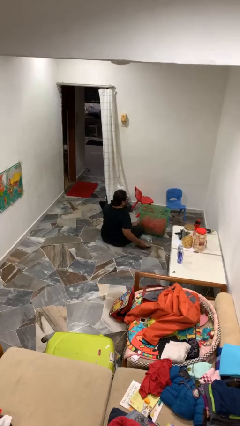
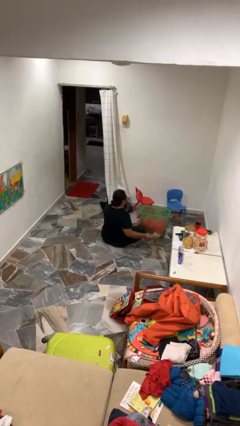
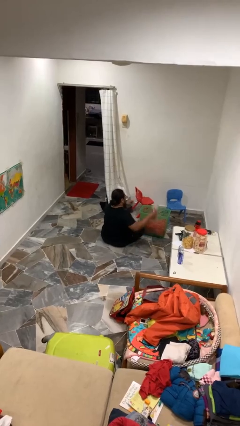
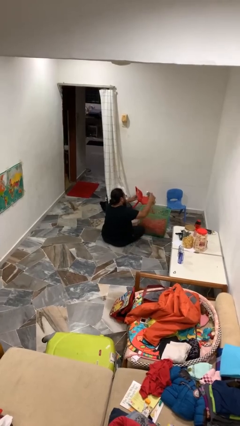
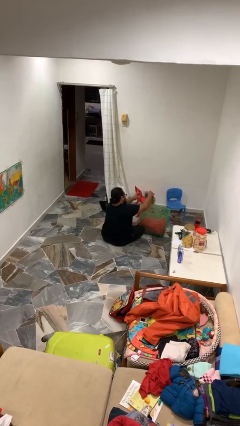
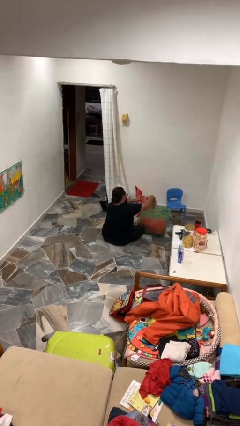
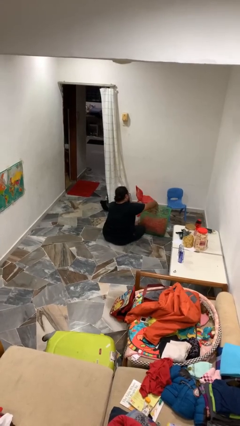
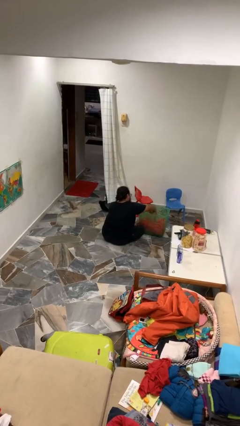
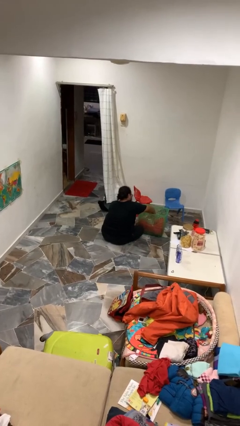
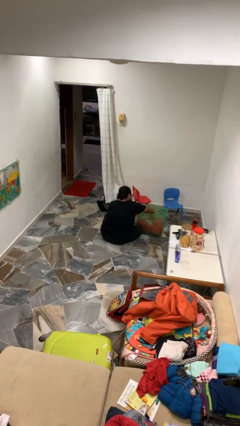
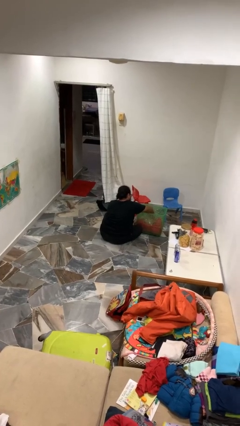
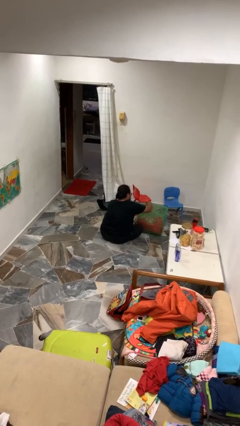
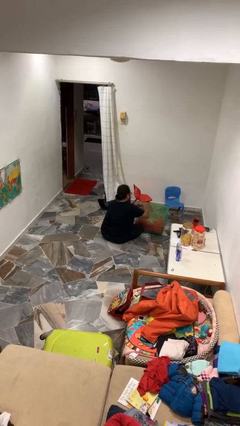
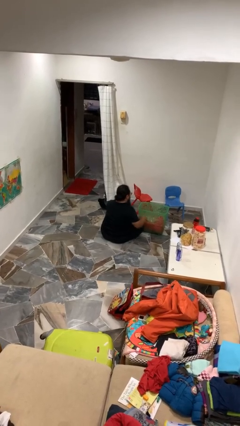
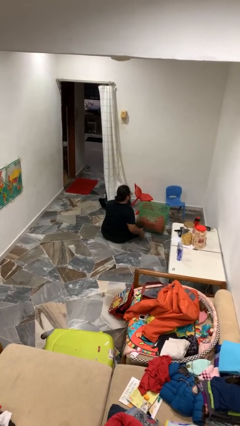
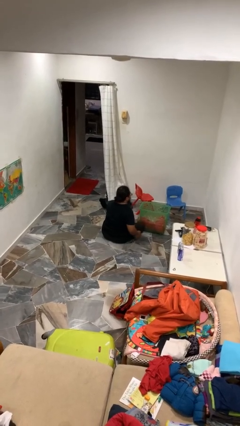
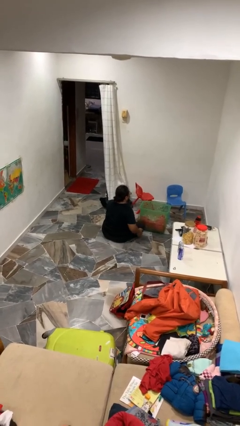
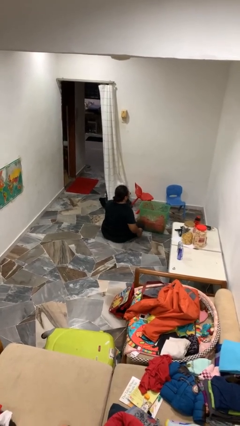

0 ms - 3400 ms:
person puts object into basket

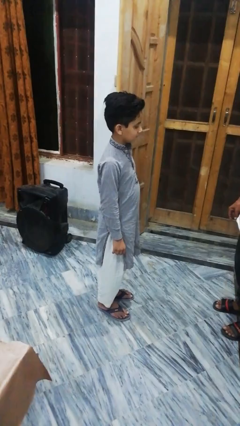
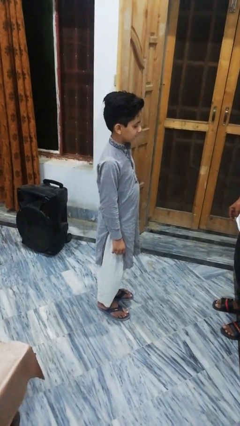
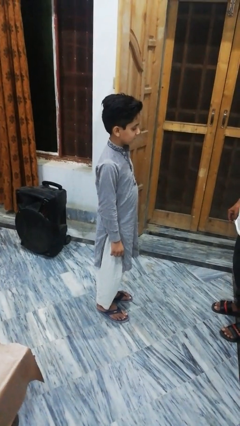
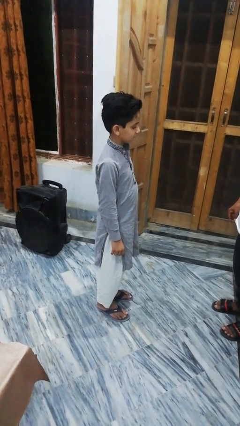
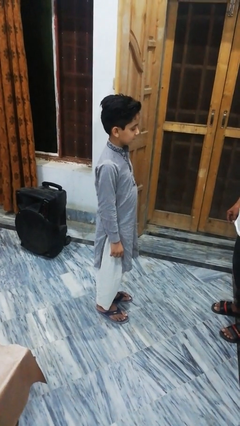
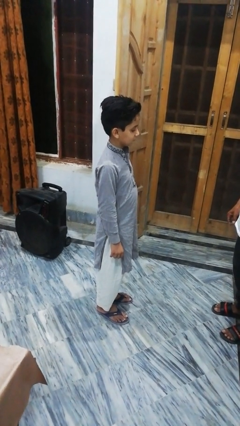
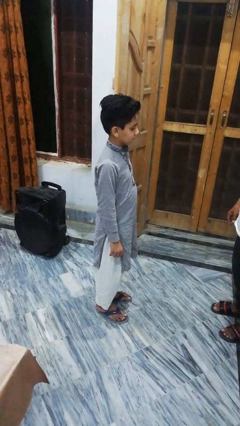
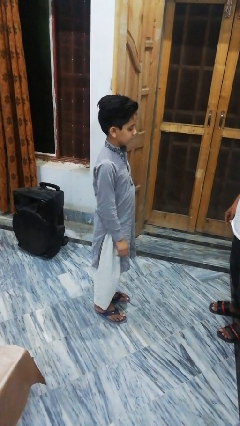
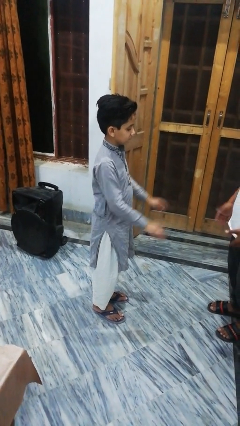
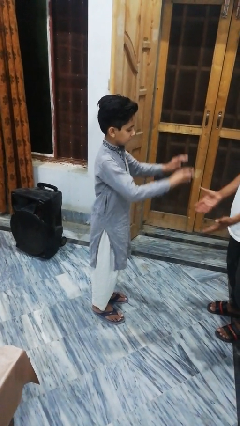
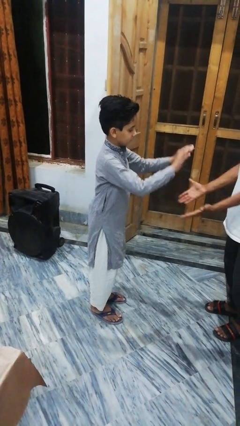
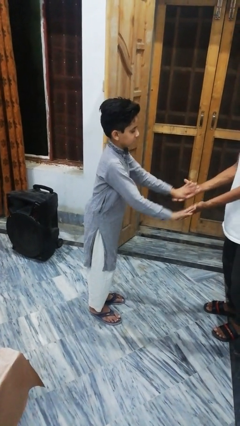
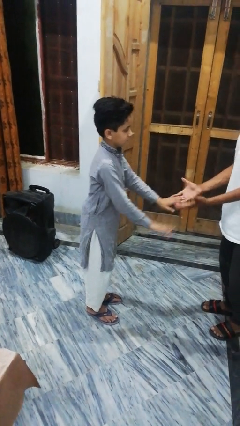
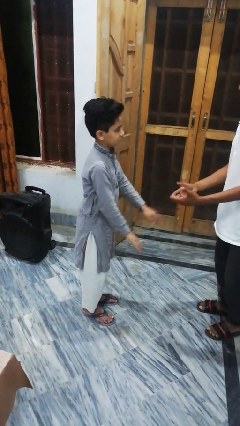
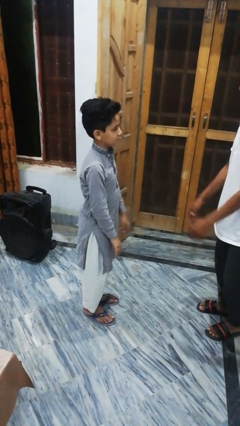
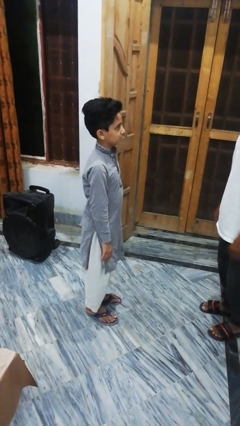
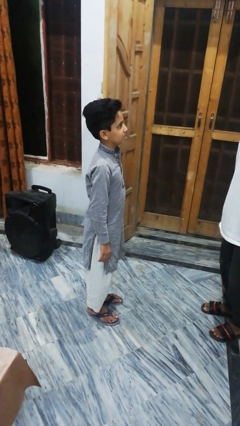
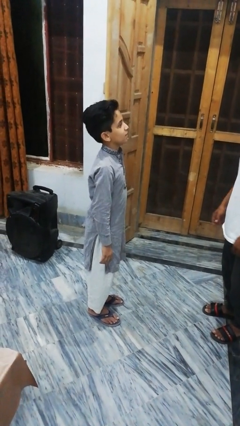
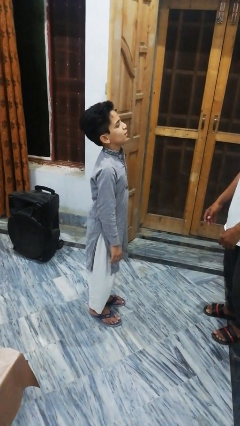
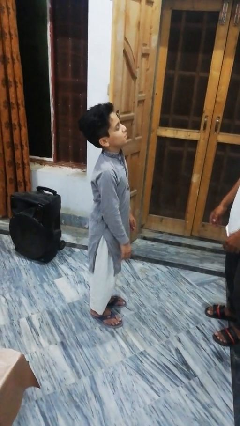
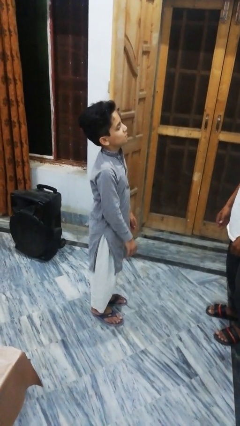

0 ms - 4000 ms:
person highfives hand

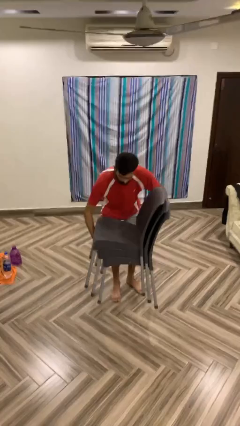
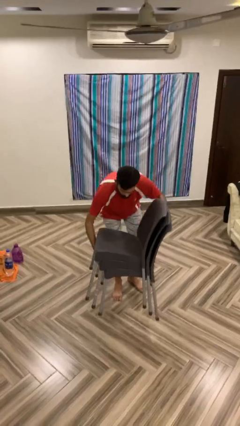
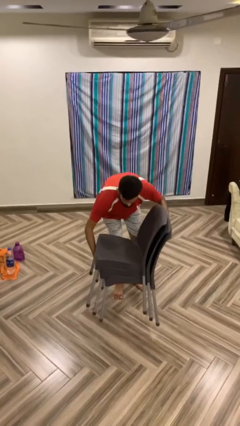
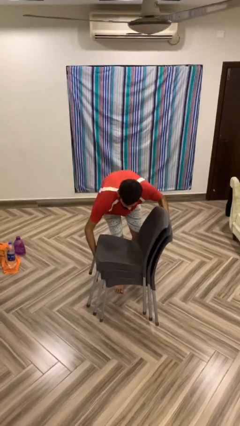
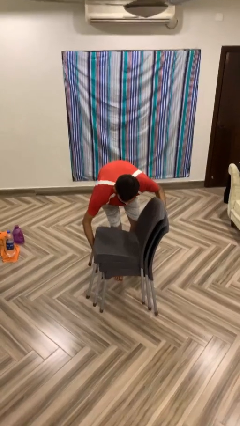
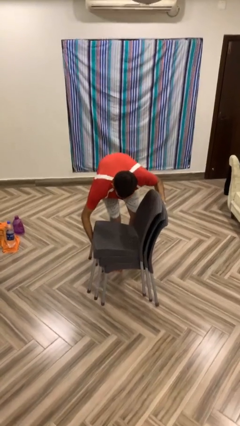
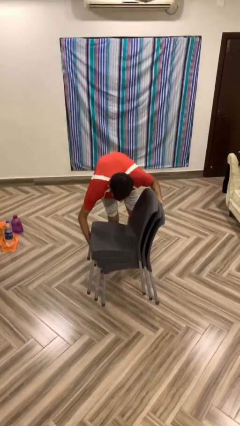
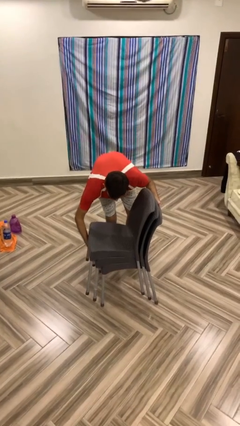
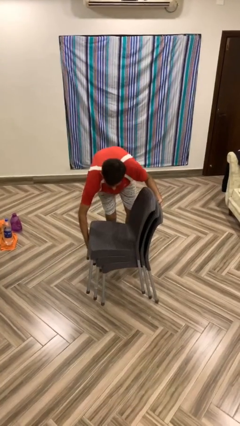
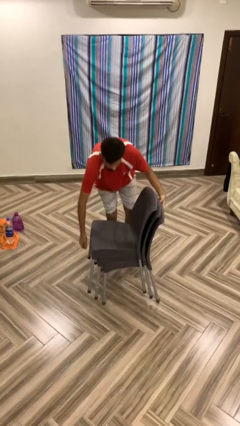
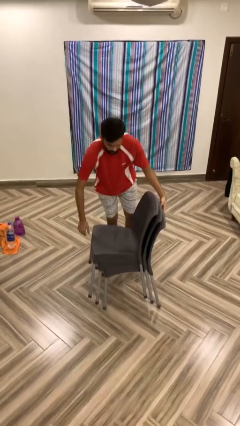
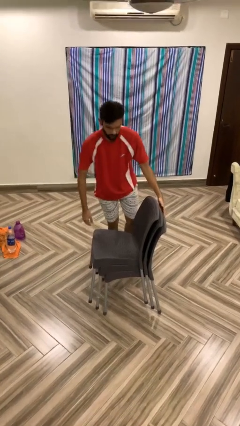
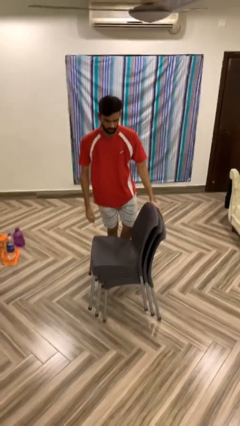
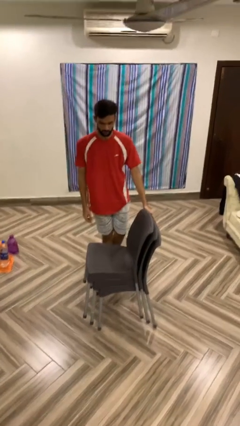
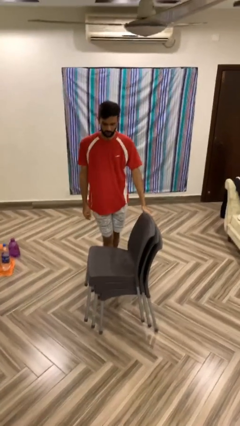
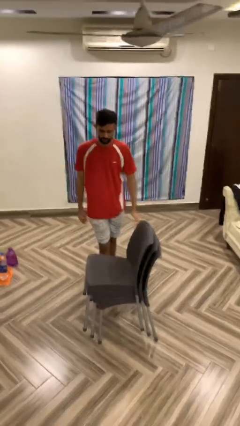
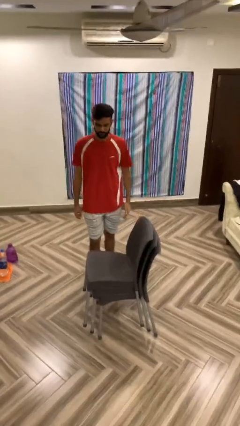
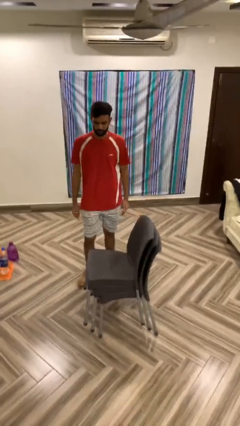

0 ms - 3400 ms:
person puts down object on floor

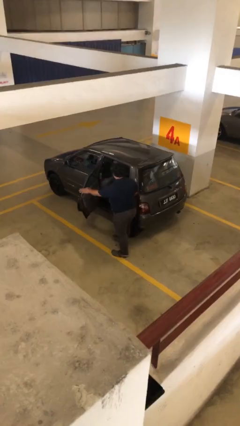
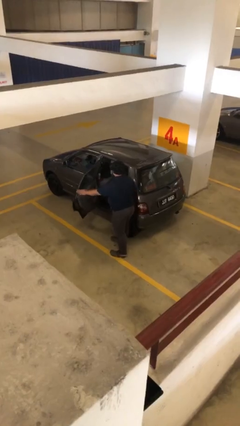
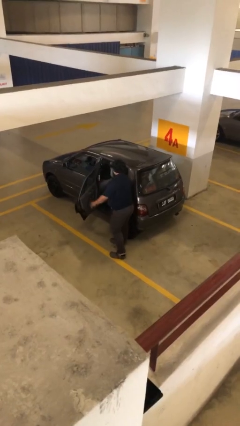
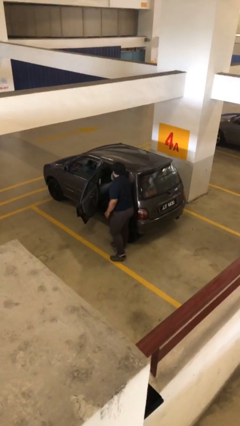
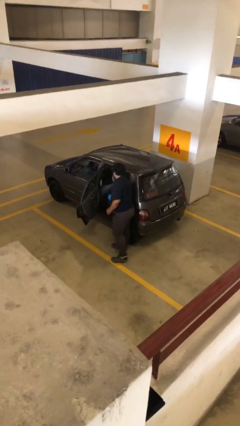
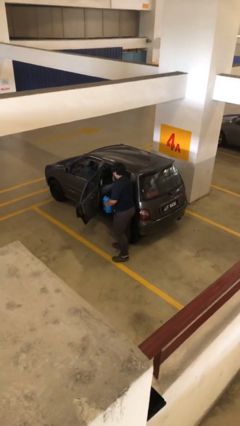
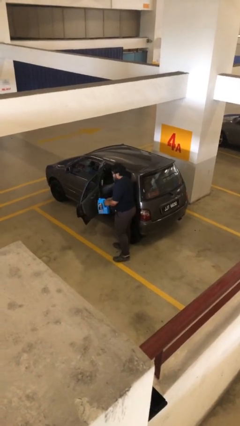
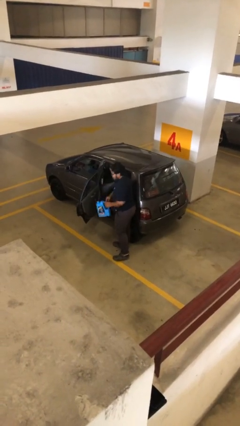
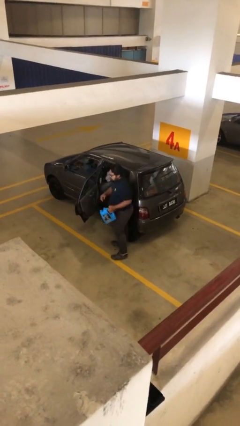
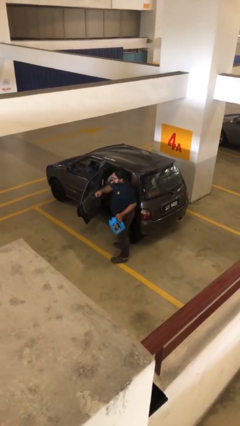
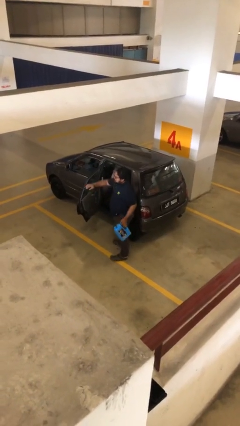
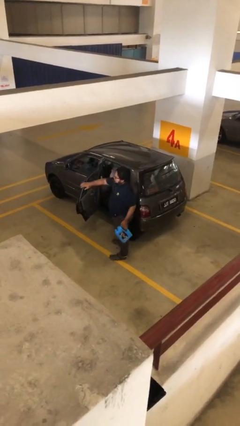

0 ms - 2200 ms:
person unloads car

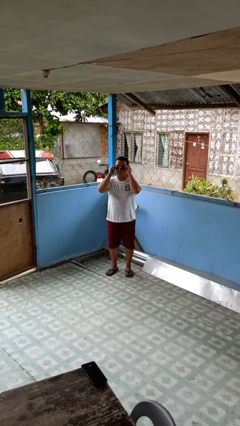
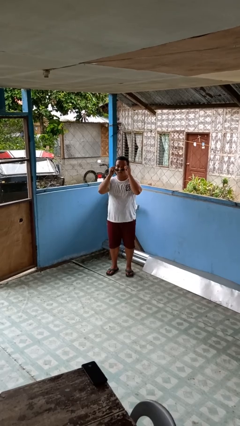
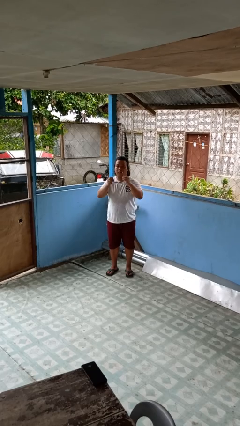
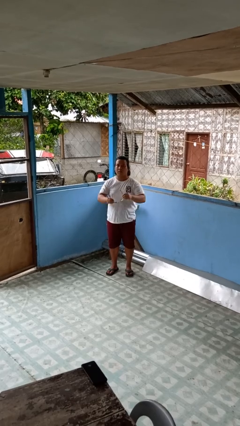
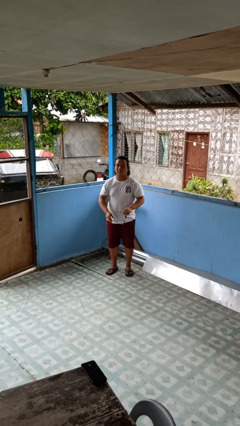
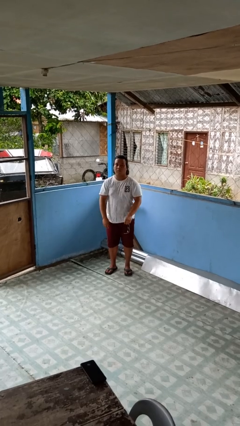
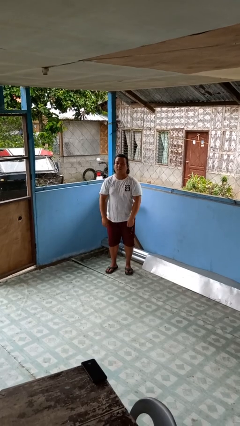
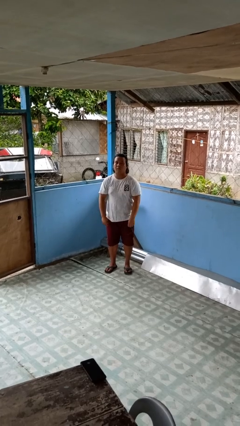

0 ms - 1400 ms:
person takes off sunglasses

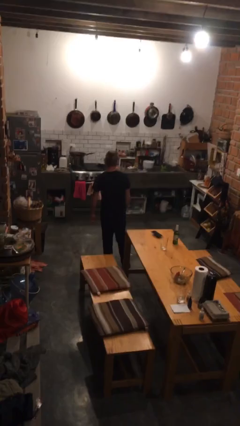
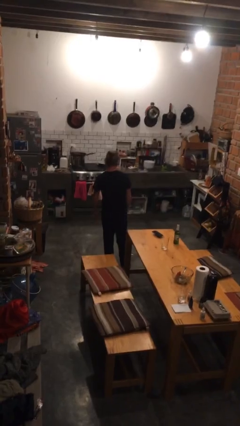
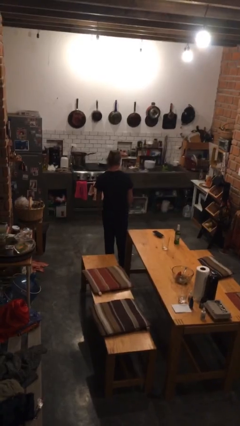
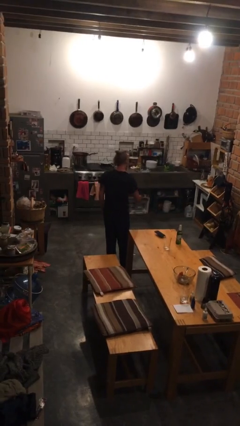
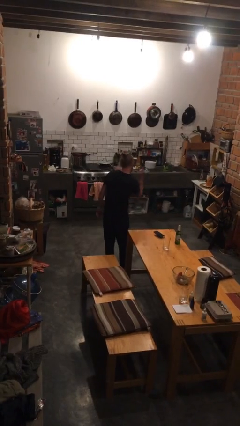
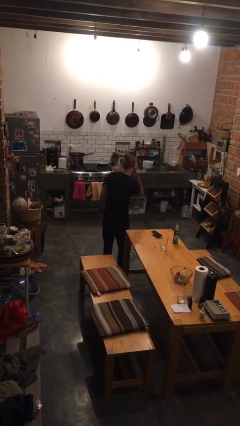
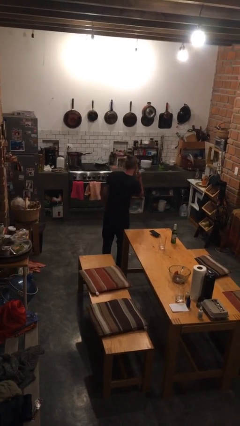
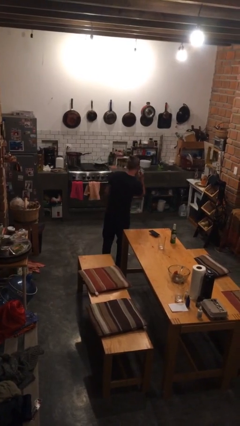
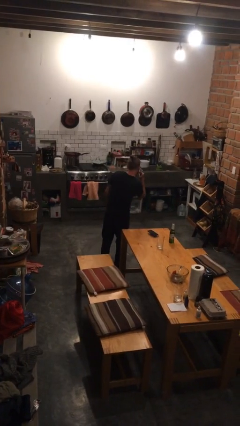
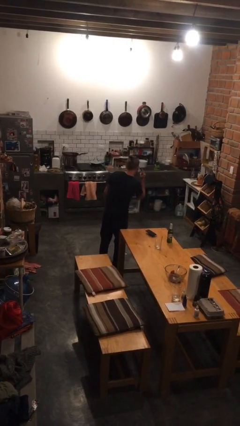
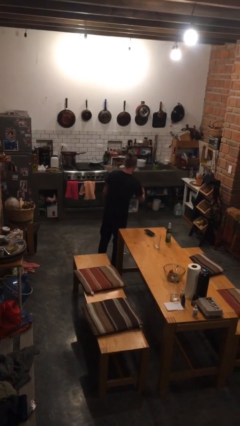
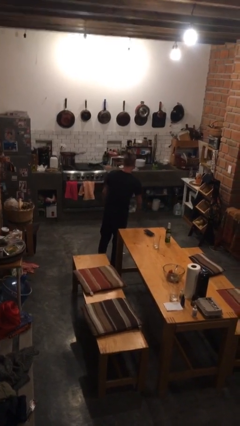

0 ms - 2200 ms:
person gestures listen closely

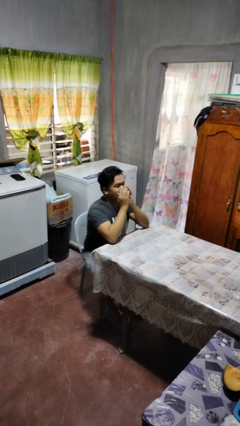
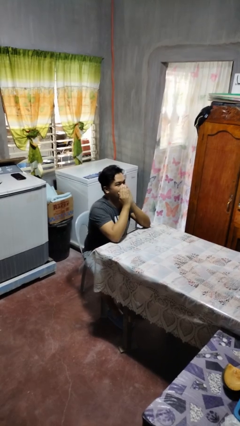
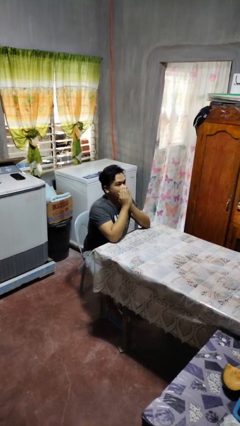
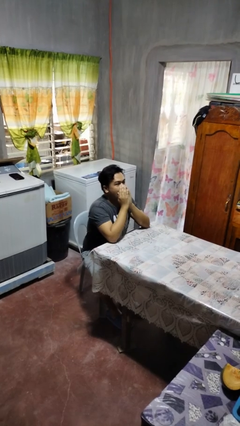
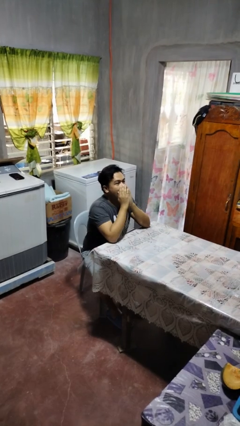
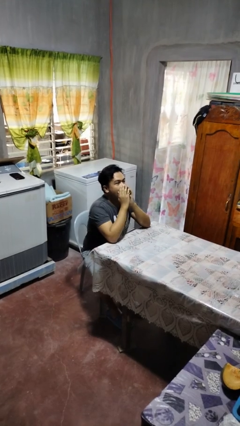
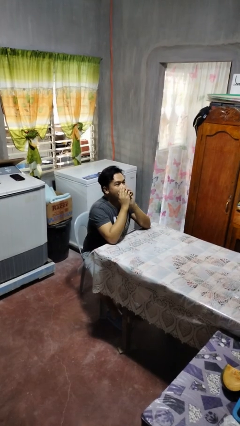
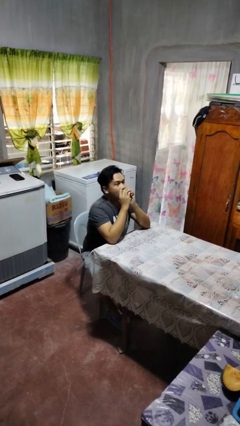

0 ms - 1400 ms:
person yawns
